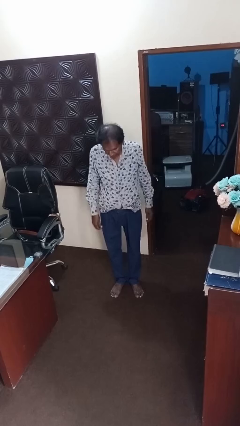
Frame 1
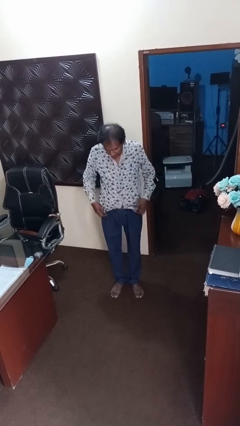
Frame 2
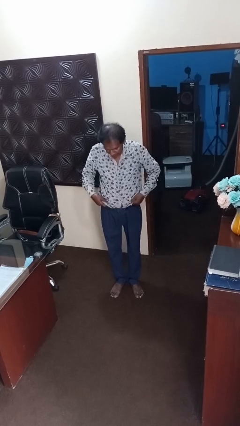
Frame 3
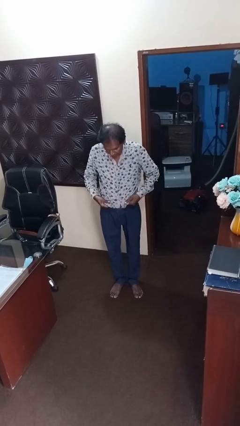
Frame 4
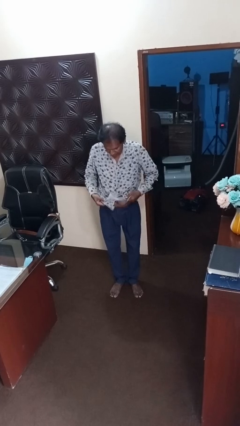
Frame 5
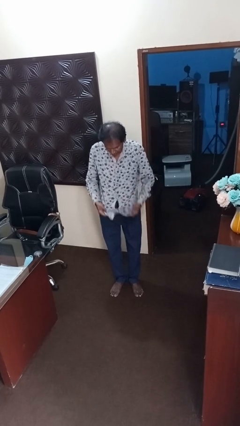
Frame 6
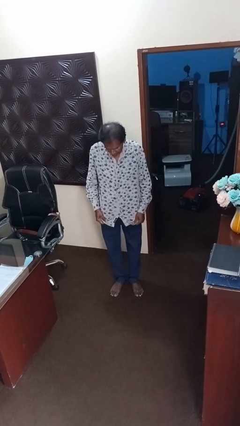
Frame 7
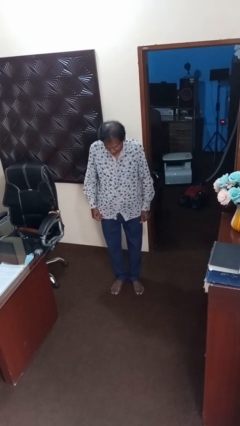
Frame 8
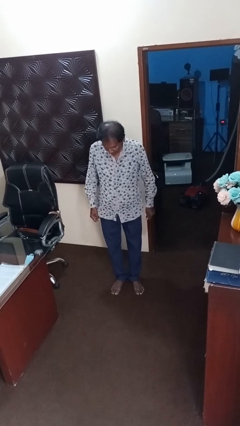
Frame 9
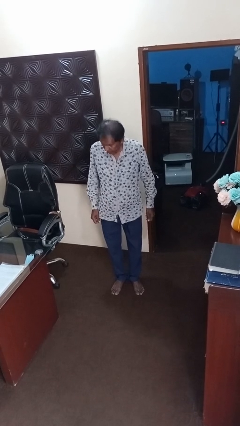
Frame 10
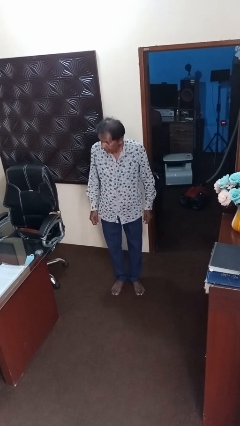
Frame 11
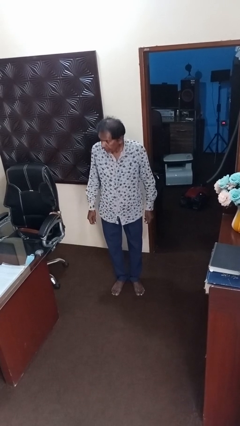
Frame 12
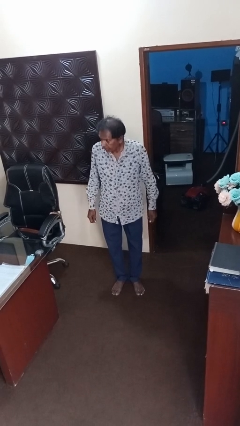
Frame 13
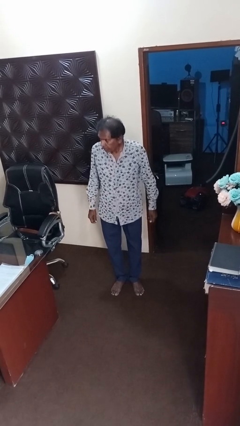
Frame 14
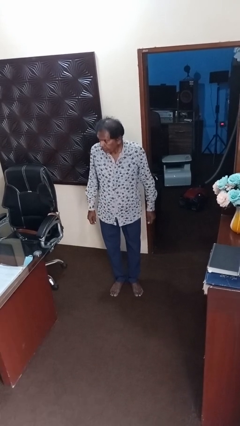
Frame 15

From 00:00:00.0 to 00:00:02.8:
person untucks shirt

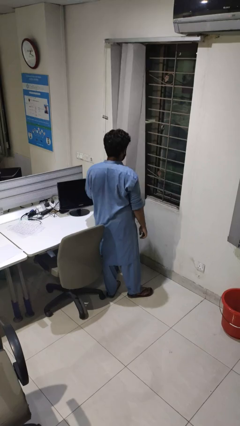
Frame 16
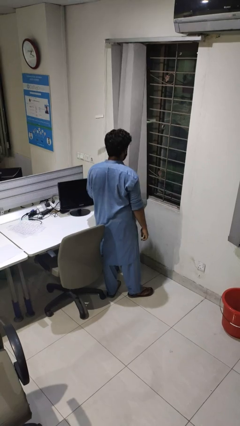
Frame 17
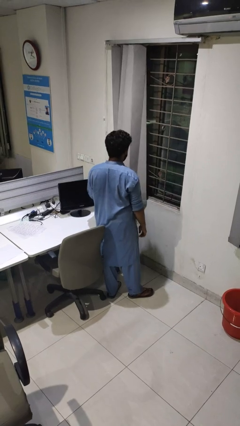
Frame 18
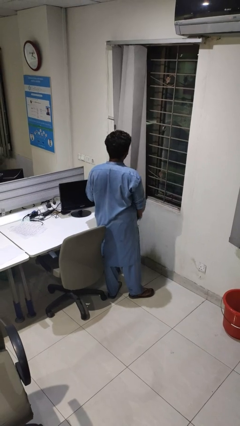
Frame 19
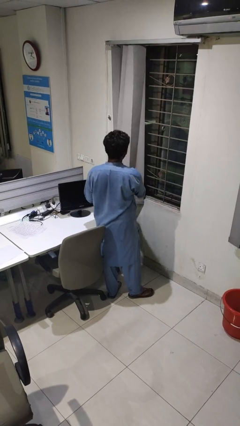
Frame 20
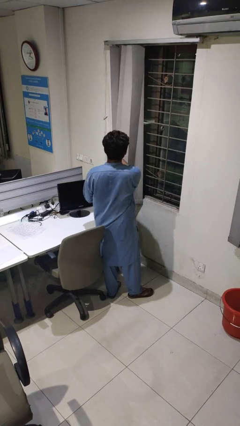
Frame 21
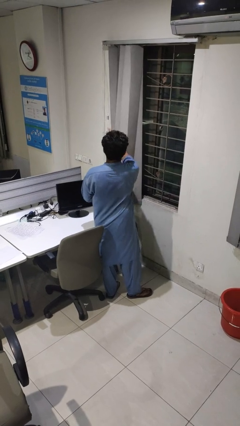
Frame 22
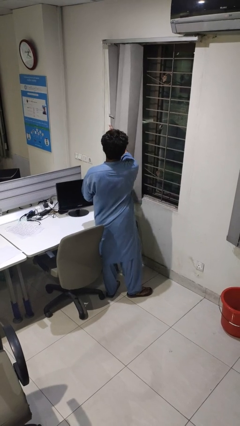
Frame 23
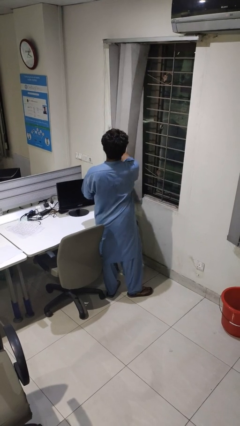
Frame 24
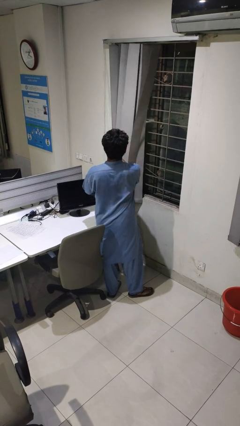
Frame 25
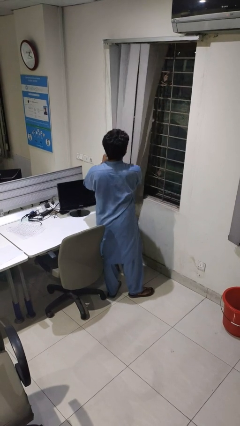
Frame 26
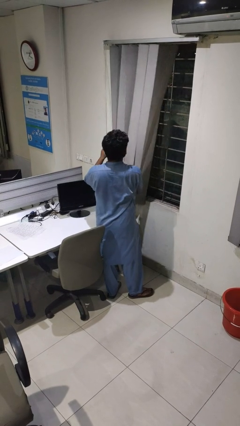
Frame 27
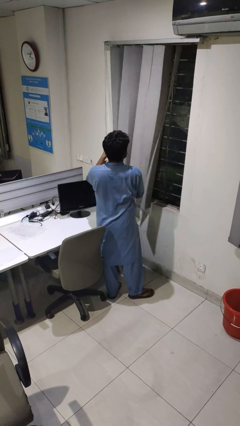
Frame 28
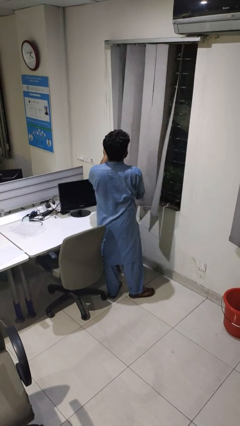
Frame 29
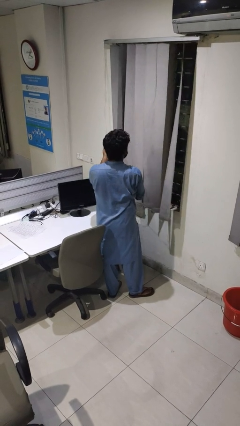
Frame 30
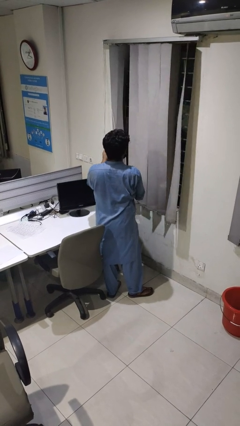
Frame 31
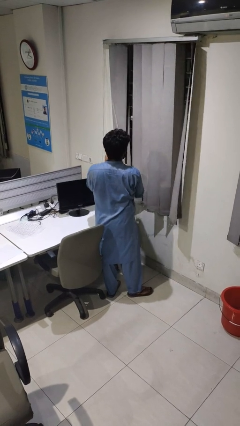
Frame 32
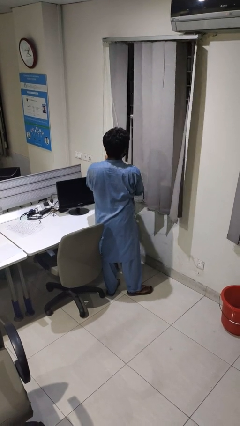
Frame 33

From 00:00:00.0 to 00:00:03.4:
person closes curtains

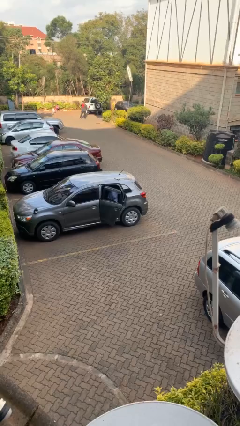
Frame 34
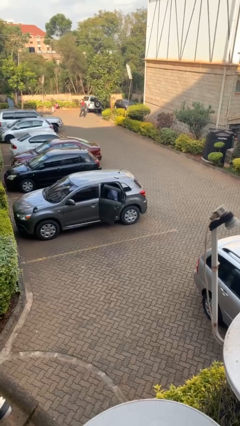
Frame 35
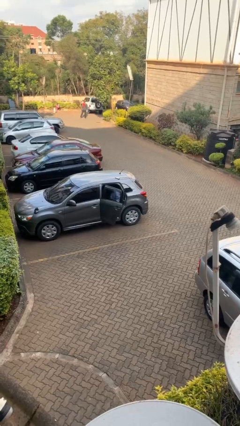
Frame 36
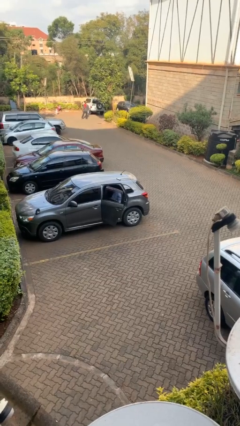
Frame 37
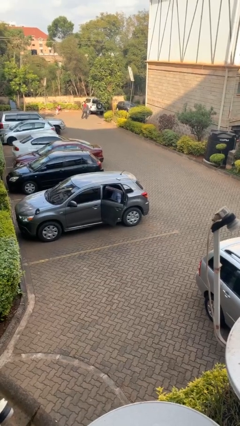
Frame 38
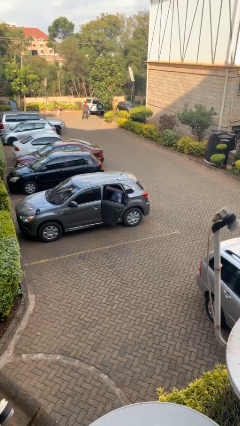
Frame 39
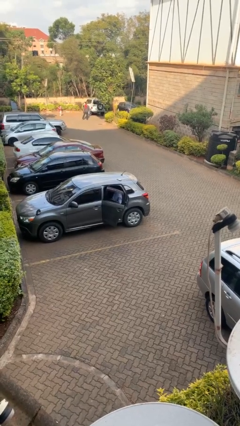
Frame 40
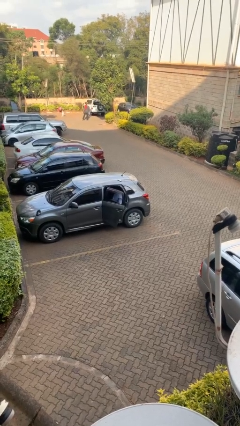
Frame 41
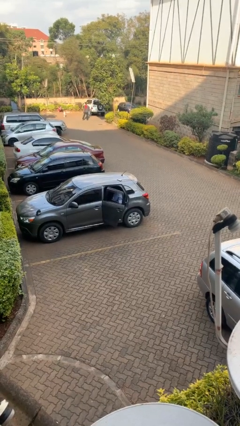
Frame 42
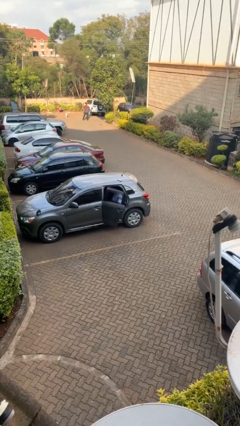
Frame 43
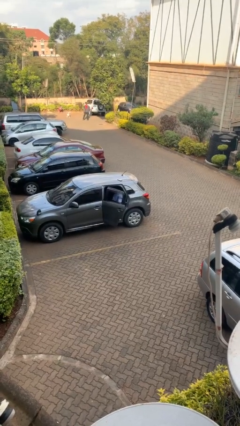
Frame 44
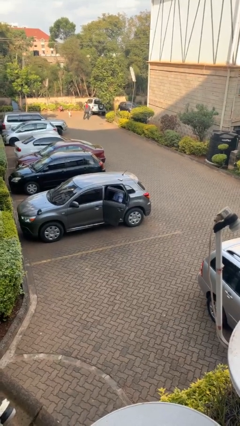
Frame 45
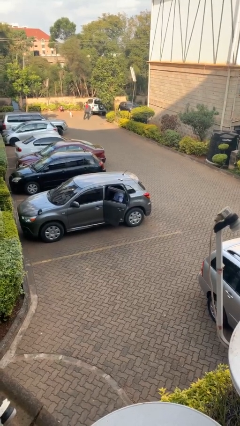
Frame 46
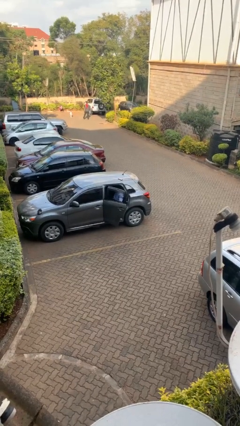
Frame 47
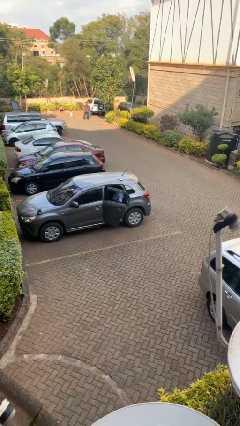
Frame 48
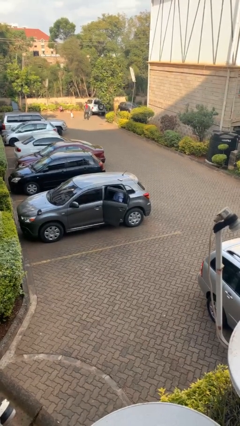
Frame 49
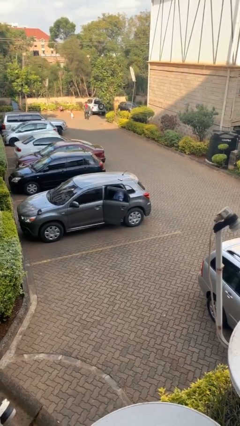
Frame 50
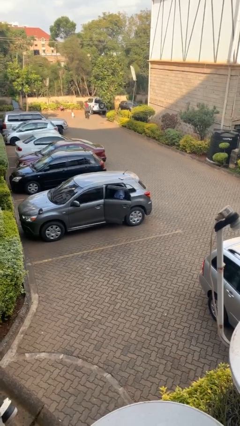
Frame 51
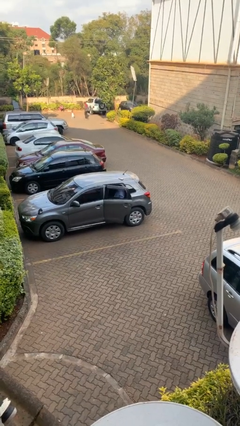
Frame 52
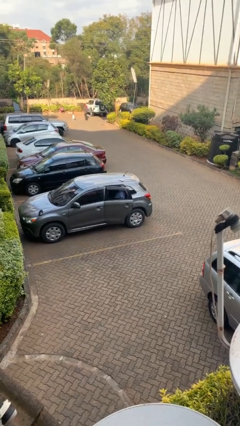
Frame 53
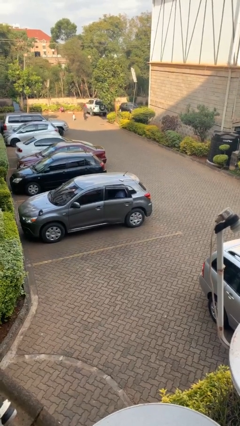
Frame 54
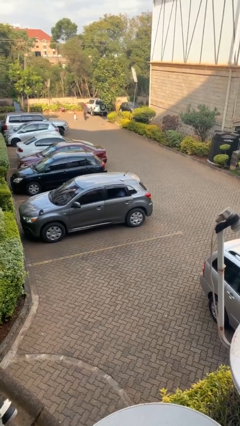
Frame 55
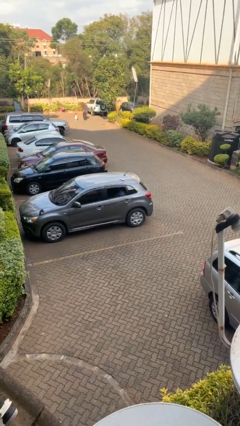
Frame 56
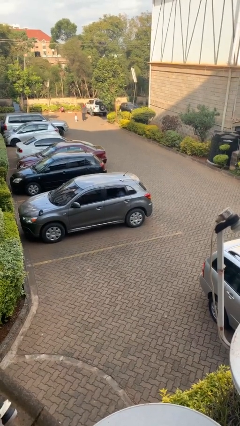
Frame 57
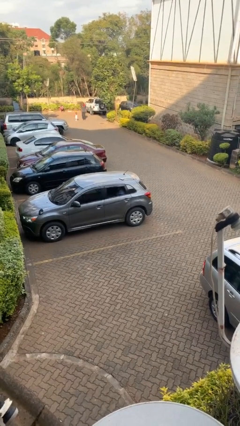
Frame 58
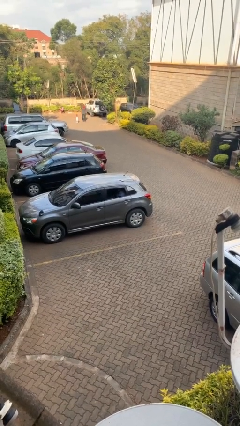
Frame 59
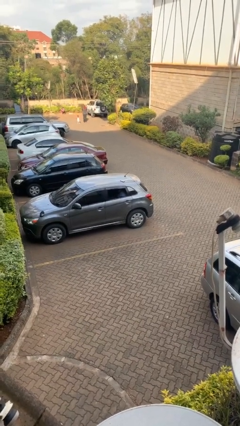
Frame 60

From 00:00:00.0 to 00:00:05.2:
person closes car door

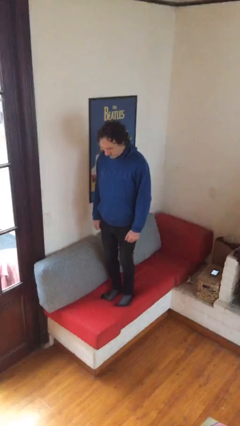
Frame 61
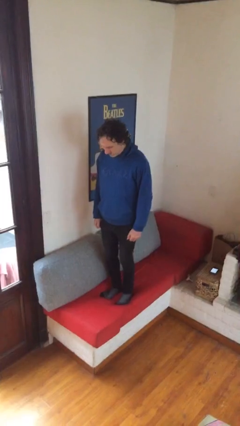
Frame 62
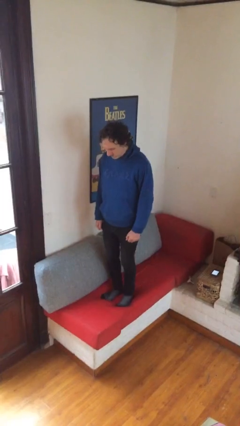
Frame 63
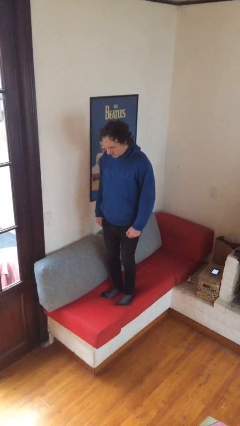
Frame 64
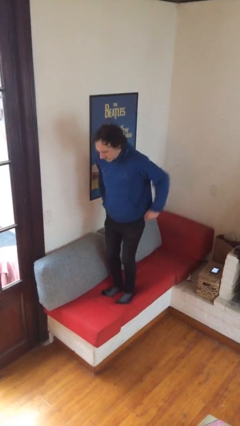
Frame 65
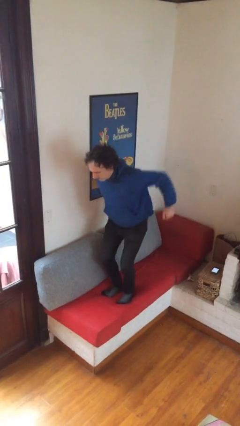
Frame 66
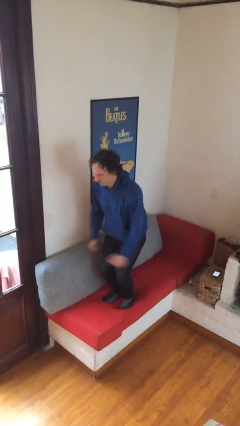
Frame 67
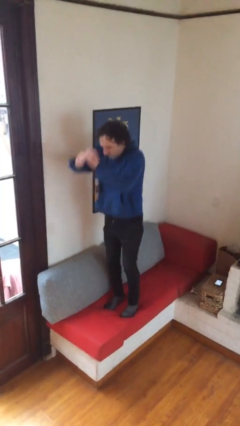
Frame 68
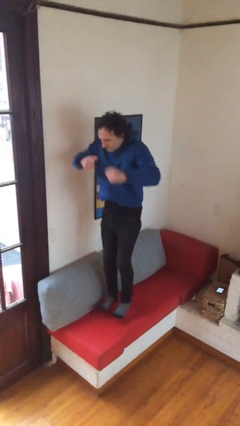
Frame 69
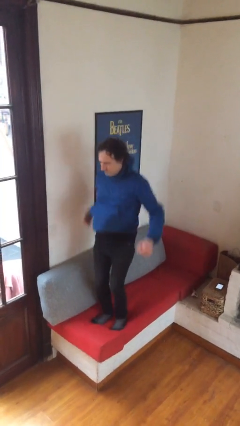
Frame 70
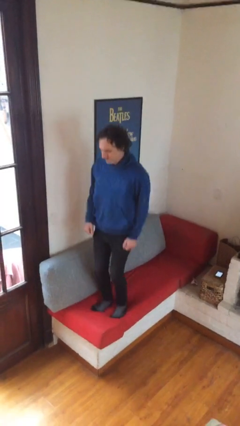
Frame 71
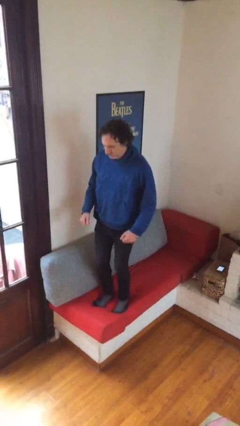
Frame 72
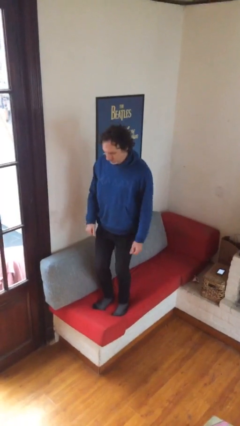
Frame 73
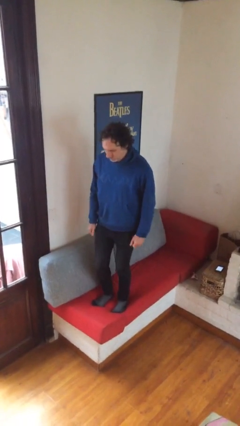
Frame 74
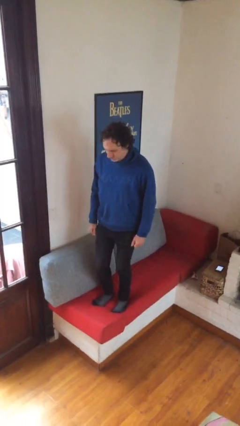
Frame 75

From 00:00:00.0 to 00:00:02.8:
person jumps on couch

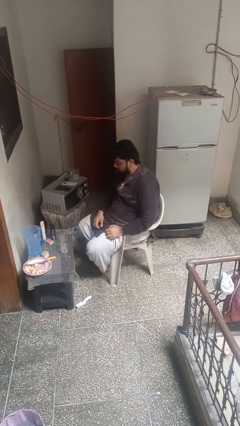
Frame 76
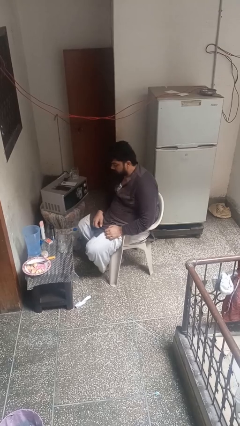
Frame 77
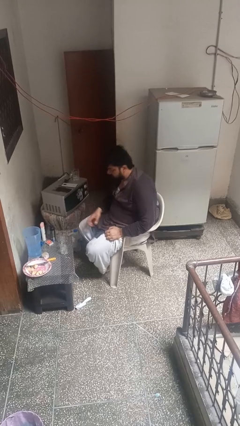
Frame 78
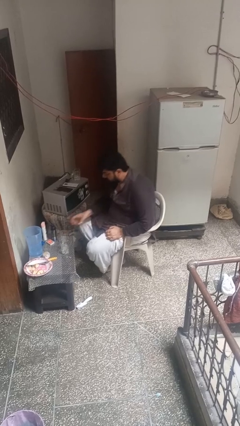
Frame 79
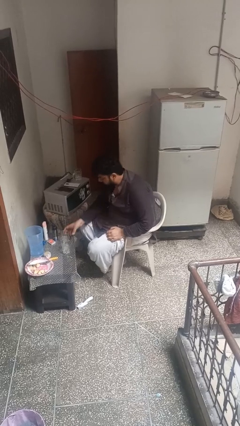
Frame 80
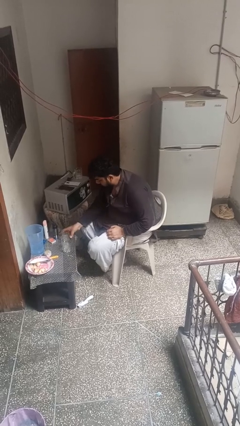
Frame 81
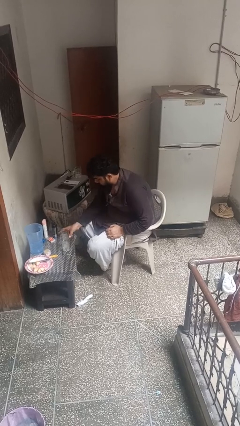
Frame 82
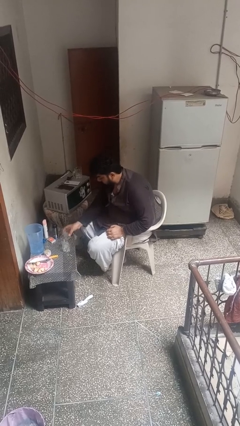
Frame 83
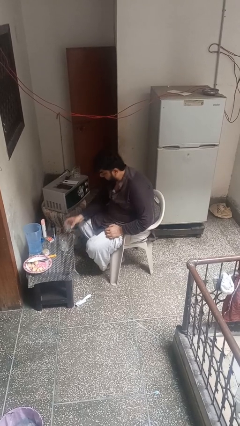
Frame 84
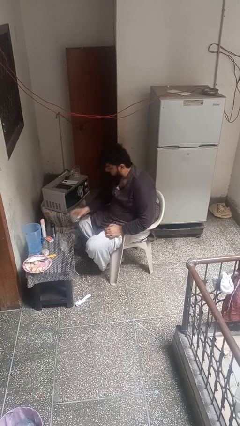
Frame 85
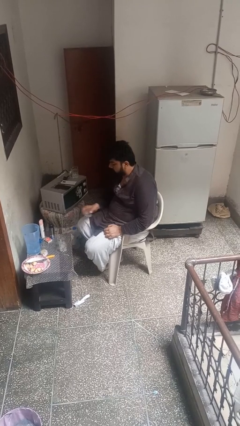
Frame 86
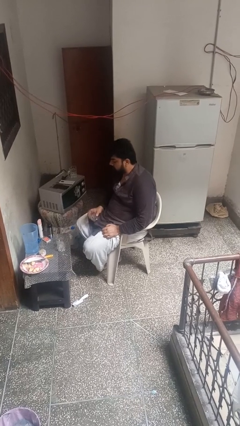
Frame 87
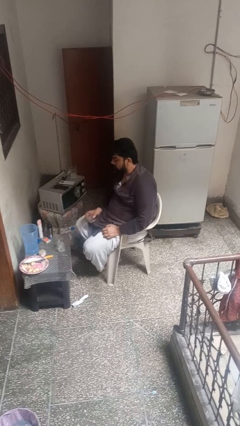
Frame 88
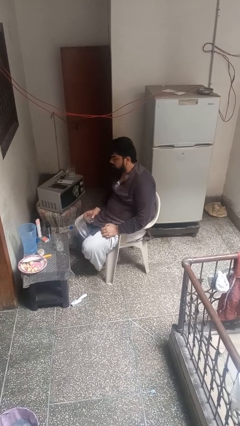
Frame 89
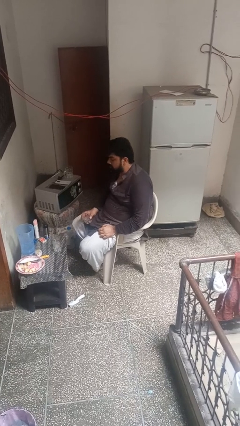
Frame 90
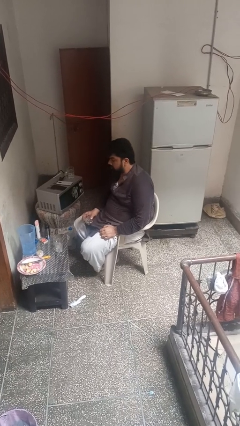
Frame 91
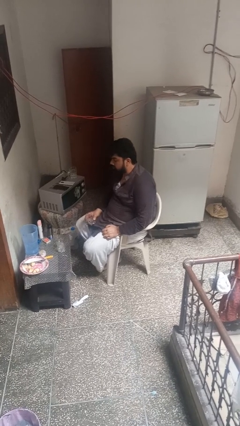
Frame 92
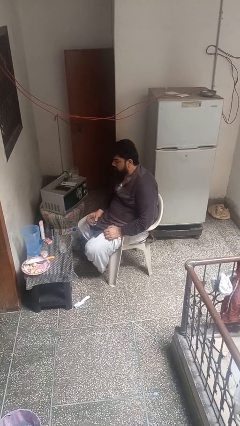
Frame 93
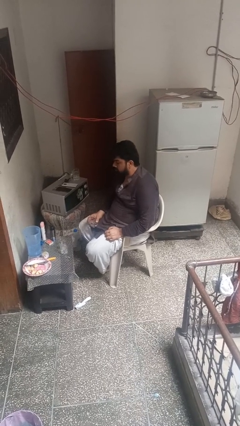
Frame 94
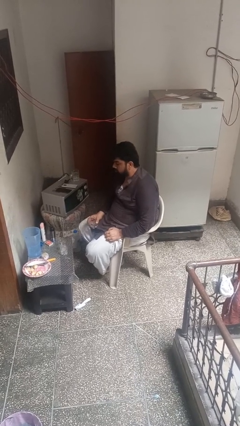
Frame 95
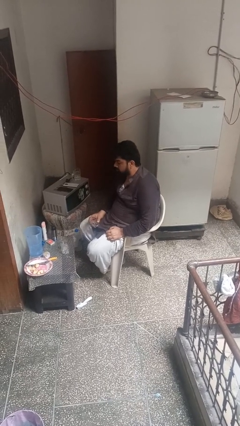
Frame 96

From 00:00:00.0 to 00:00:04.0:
person picks up object from table
